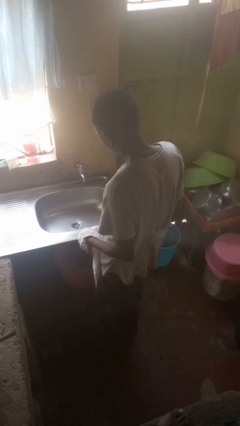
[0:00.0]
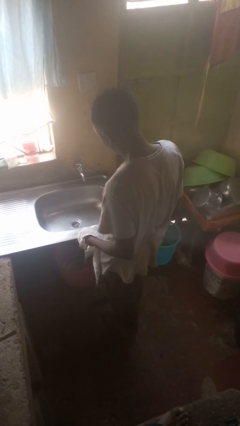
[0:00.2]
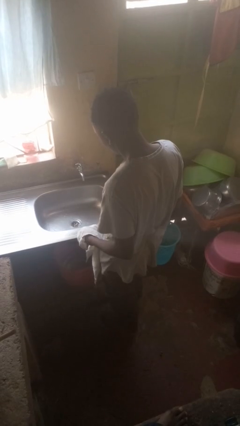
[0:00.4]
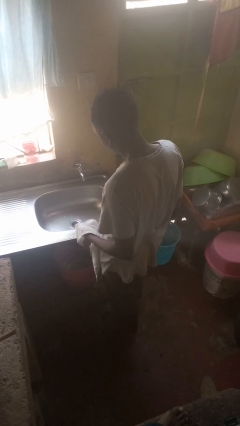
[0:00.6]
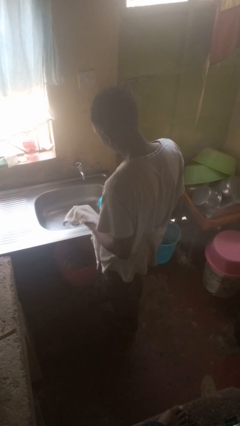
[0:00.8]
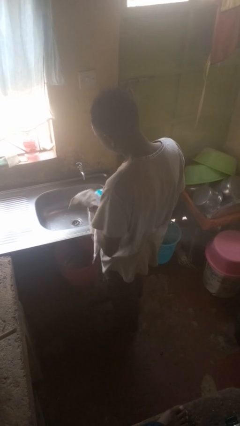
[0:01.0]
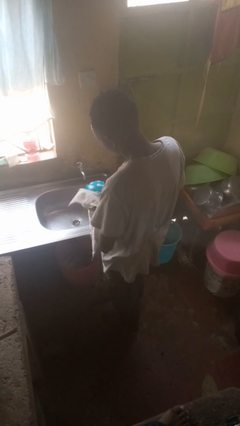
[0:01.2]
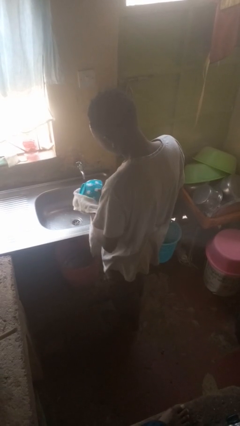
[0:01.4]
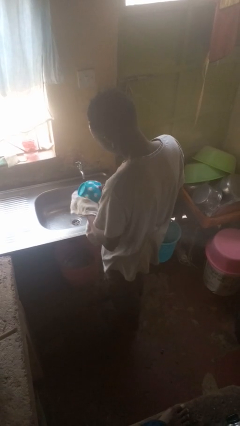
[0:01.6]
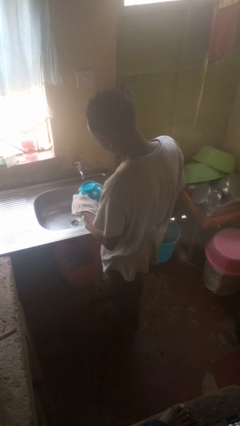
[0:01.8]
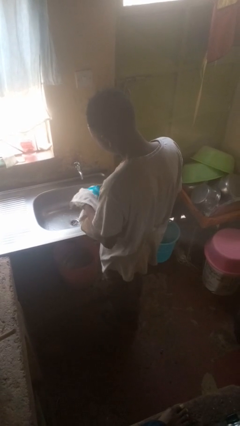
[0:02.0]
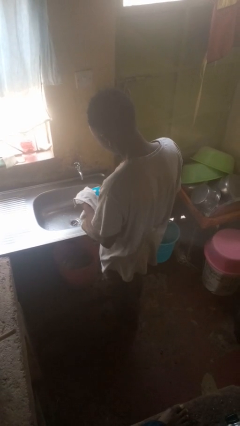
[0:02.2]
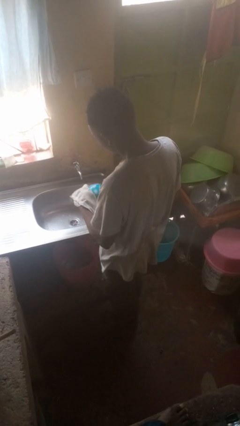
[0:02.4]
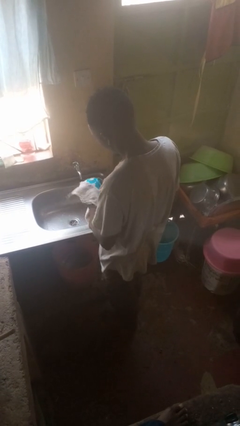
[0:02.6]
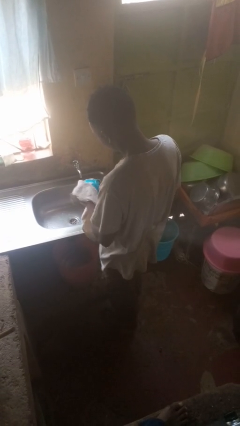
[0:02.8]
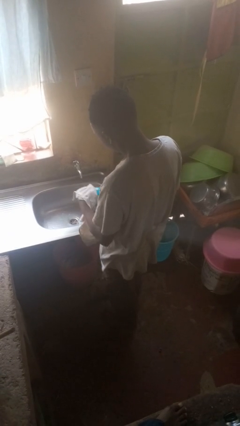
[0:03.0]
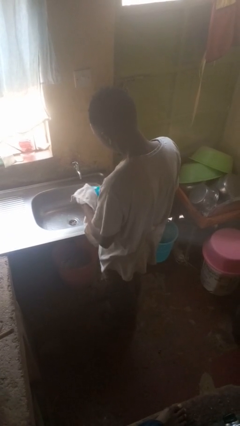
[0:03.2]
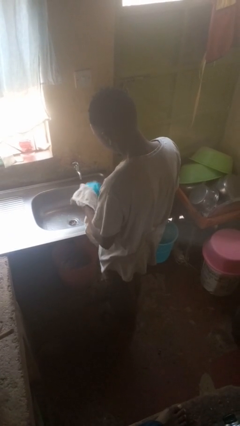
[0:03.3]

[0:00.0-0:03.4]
person dries dish

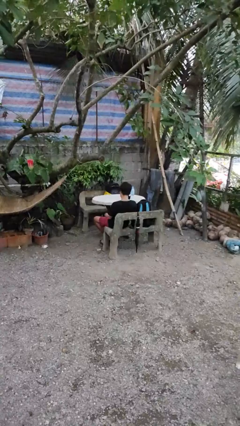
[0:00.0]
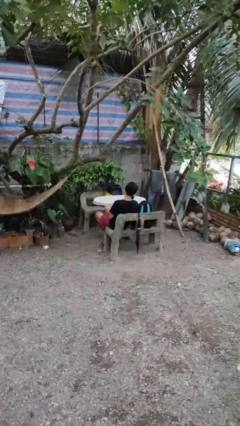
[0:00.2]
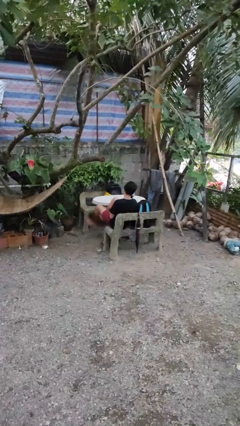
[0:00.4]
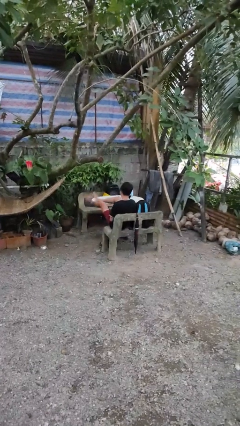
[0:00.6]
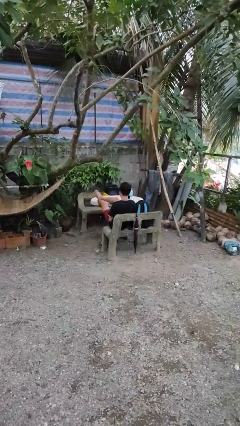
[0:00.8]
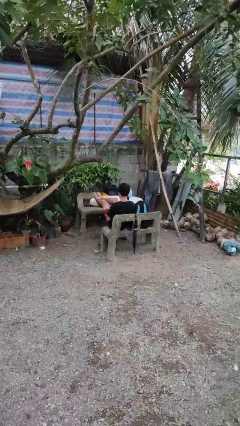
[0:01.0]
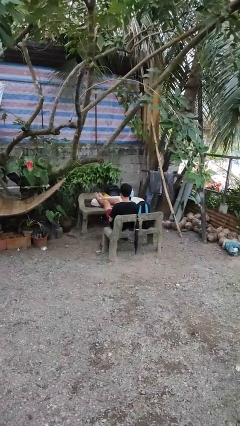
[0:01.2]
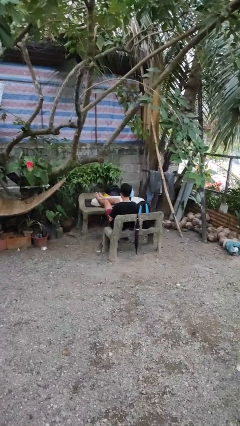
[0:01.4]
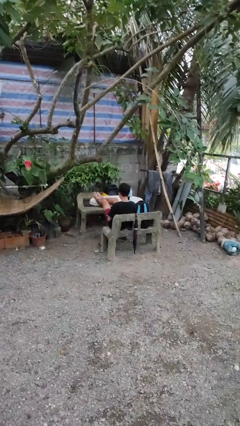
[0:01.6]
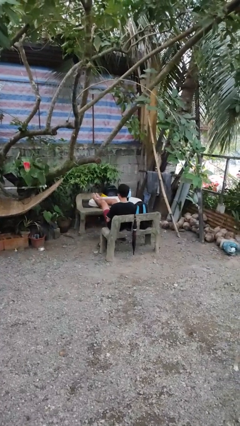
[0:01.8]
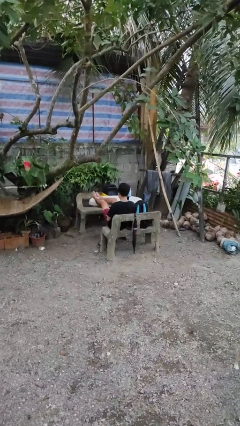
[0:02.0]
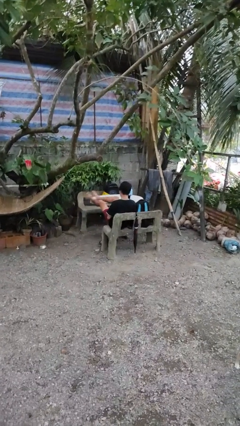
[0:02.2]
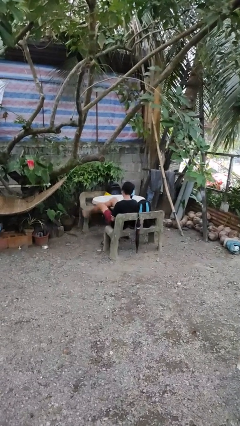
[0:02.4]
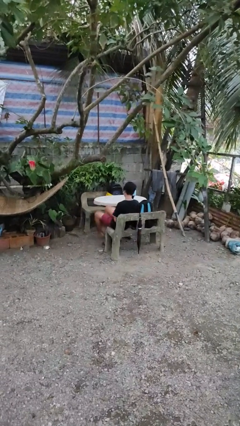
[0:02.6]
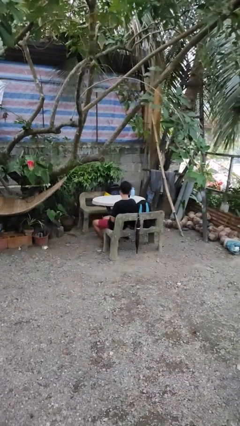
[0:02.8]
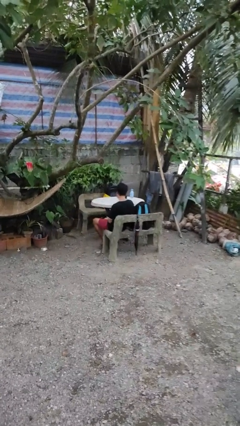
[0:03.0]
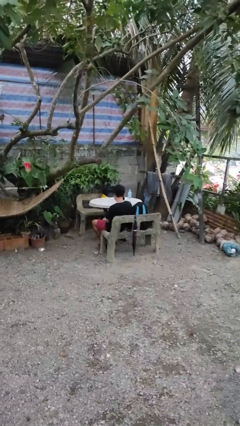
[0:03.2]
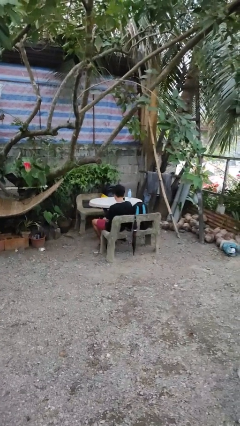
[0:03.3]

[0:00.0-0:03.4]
person puts feet up

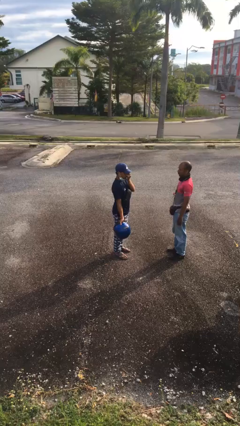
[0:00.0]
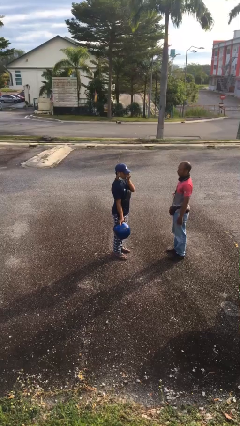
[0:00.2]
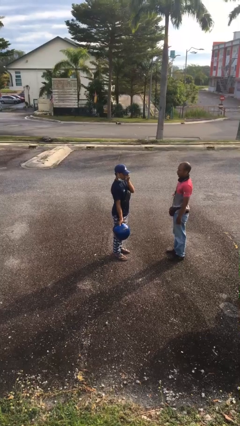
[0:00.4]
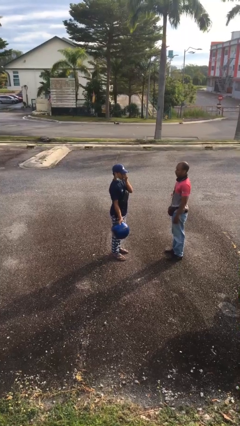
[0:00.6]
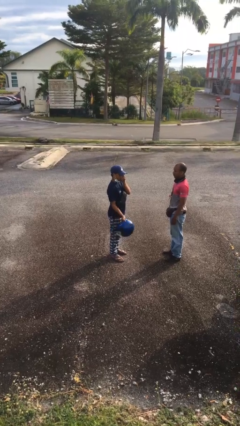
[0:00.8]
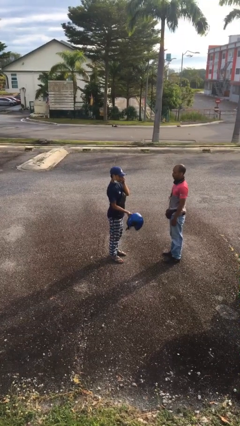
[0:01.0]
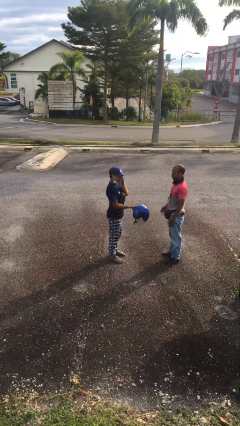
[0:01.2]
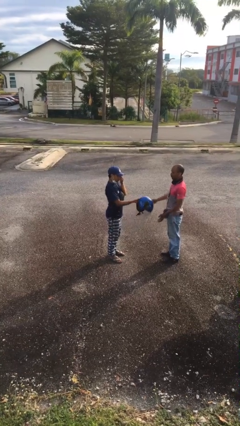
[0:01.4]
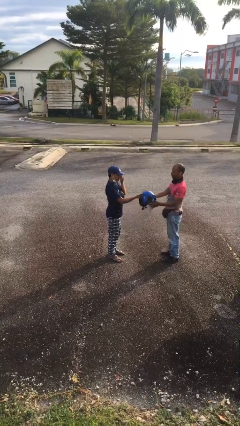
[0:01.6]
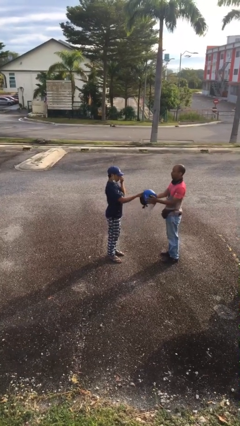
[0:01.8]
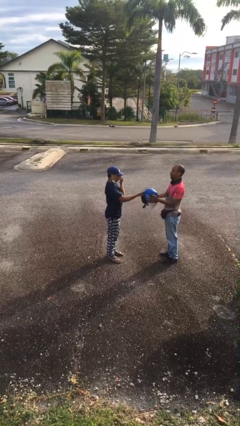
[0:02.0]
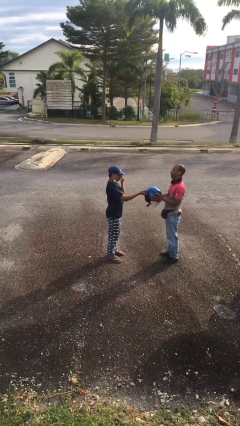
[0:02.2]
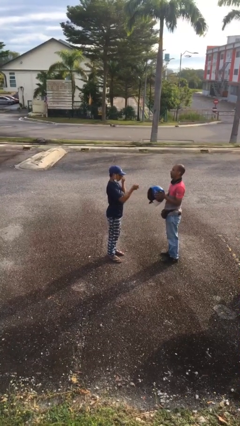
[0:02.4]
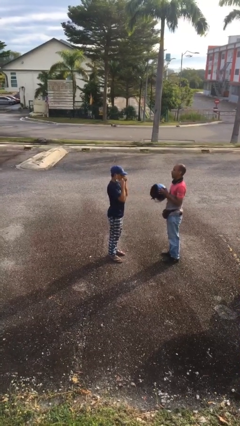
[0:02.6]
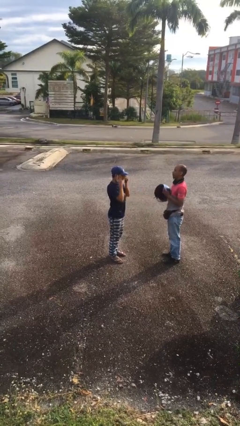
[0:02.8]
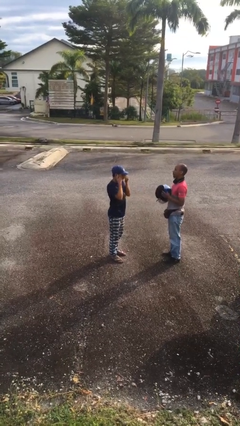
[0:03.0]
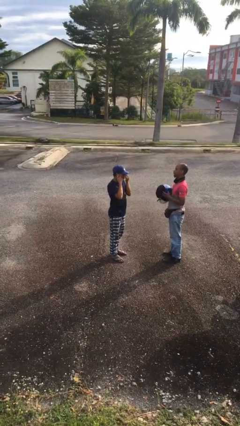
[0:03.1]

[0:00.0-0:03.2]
person transfers object to person

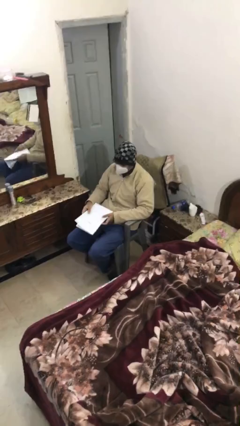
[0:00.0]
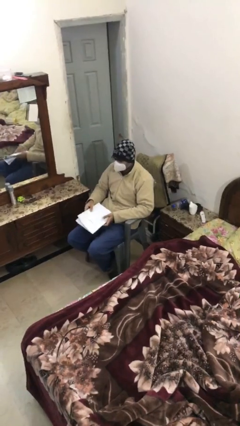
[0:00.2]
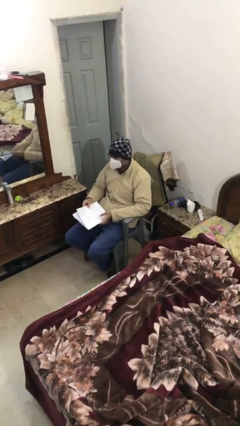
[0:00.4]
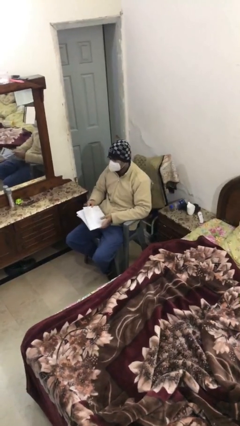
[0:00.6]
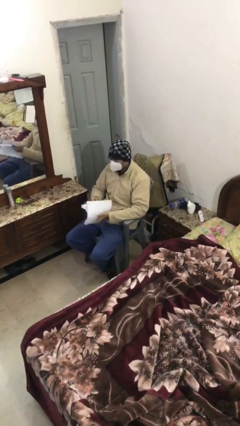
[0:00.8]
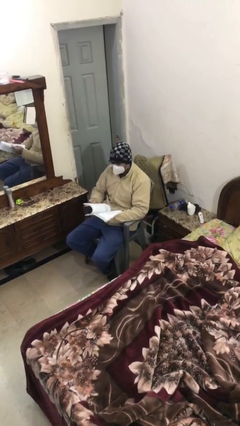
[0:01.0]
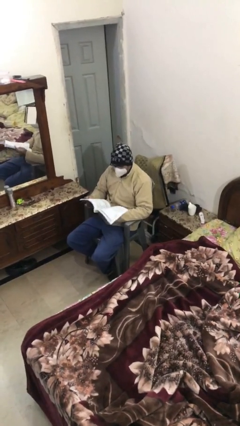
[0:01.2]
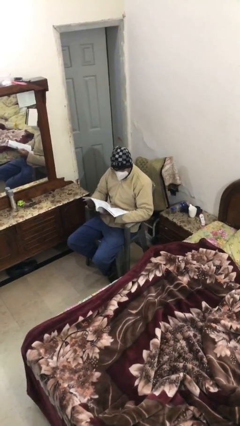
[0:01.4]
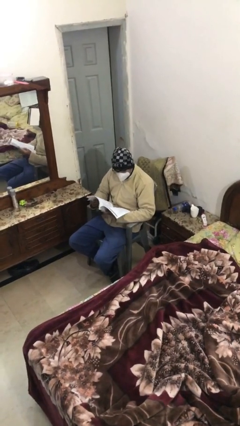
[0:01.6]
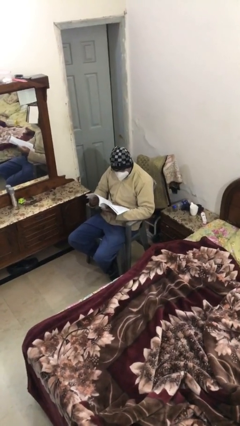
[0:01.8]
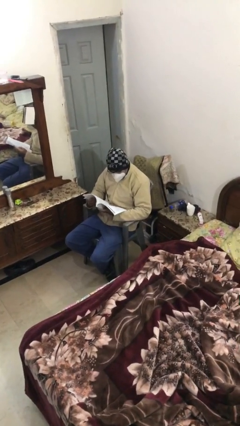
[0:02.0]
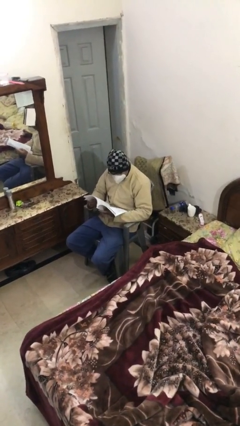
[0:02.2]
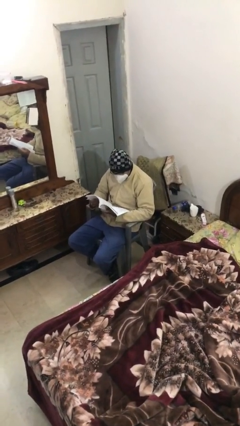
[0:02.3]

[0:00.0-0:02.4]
person reads document

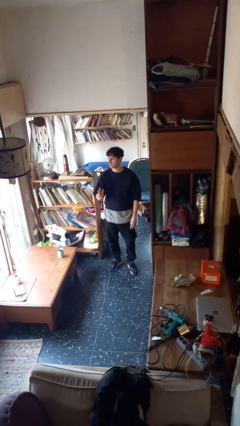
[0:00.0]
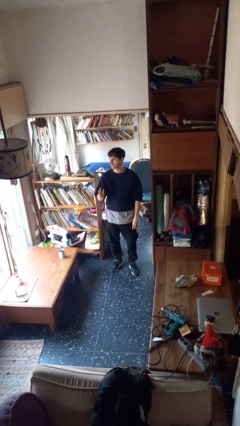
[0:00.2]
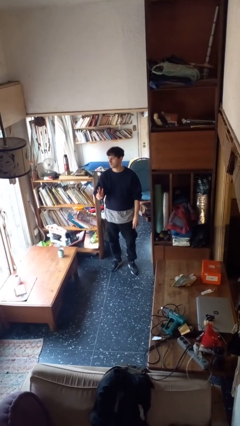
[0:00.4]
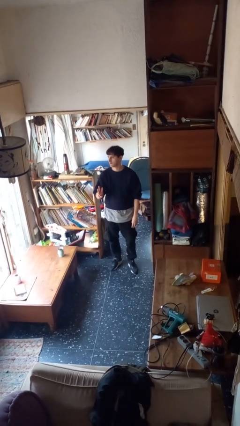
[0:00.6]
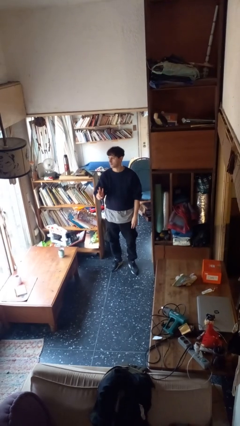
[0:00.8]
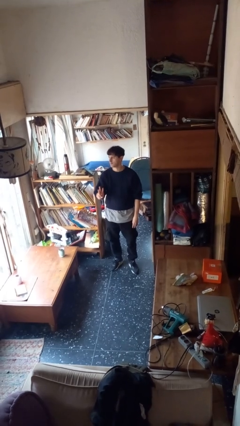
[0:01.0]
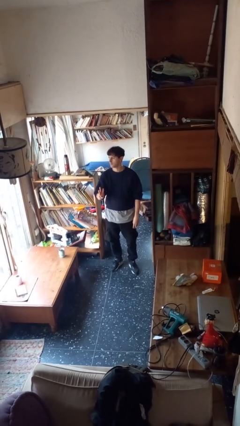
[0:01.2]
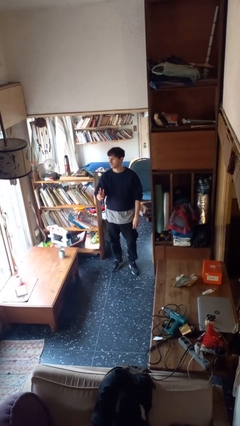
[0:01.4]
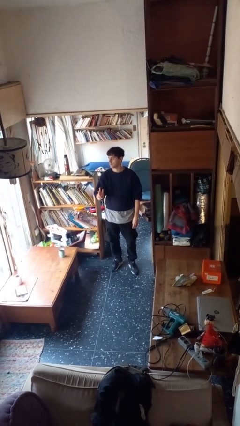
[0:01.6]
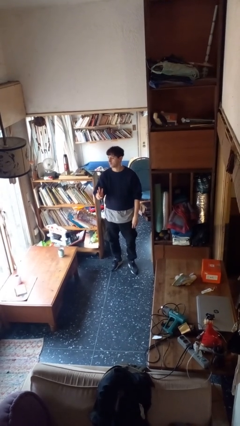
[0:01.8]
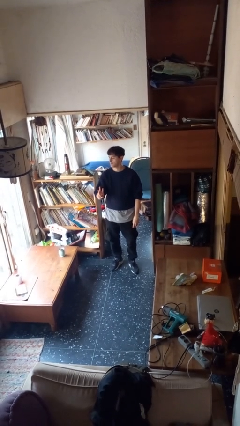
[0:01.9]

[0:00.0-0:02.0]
person gestures number three

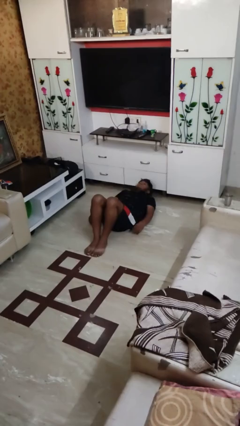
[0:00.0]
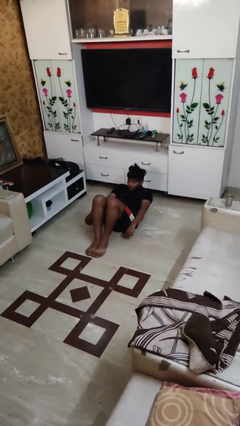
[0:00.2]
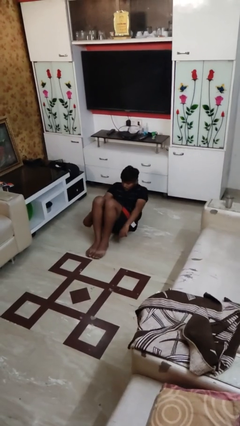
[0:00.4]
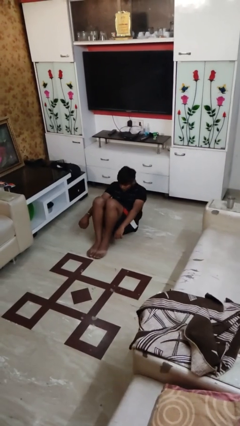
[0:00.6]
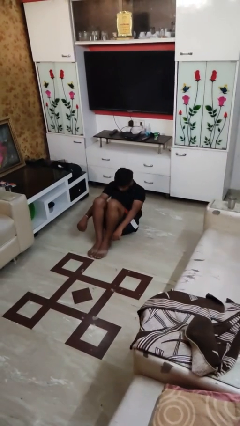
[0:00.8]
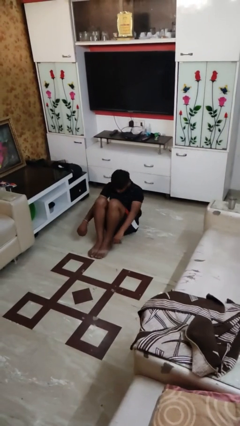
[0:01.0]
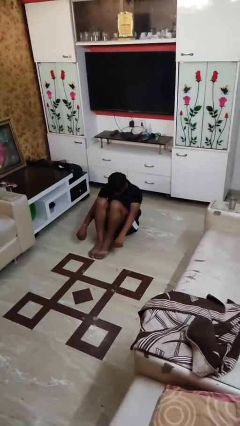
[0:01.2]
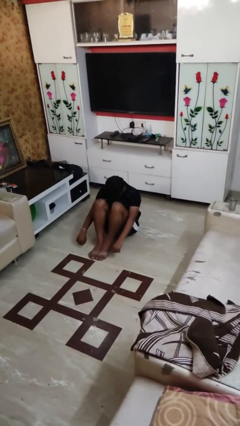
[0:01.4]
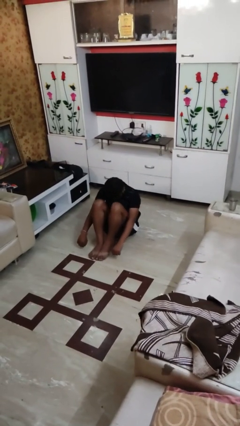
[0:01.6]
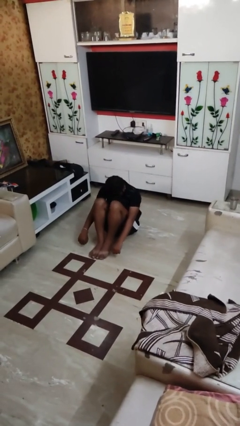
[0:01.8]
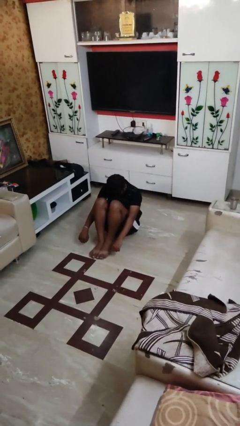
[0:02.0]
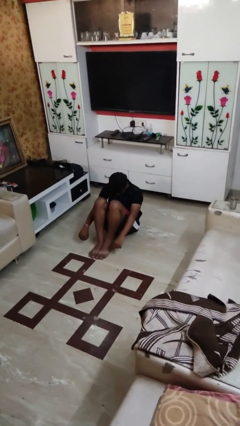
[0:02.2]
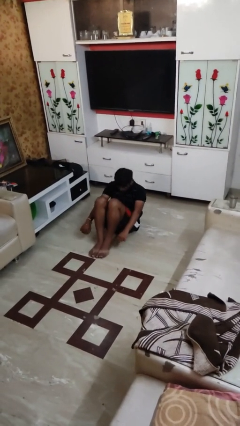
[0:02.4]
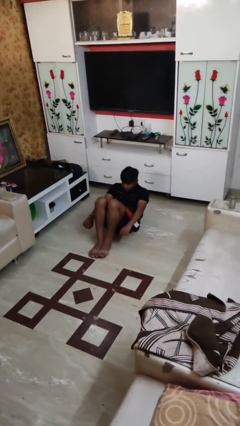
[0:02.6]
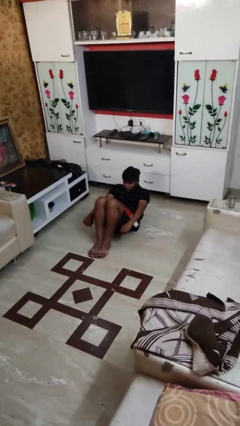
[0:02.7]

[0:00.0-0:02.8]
person exercises with situp
